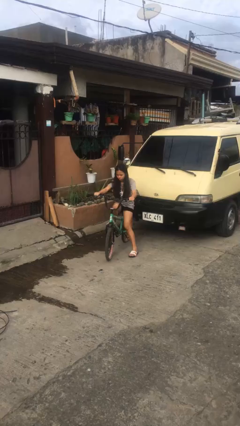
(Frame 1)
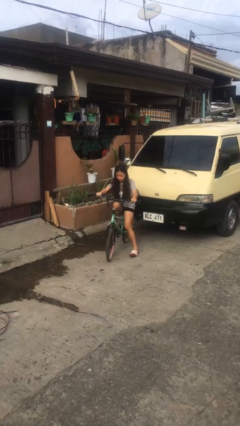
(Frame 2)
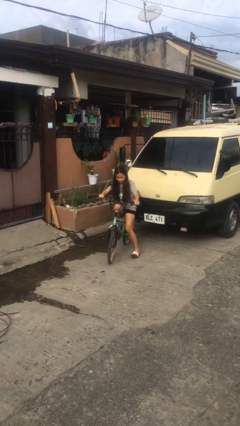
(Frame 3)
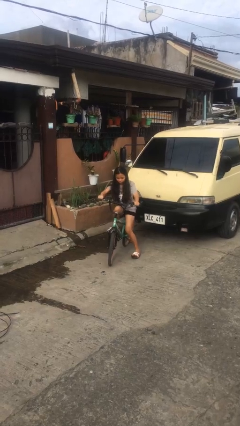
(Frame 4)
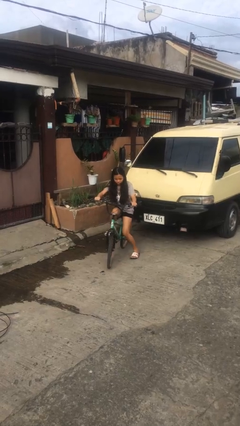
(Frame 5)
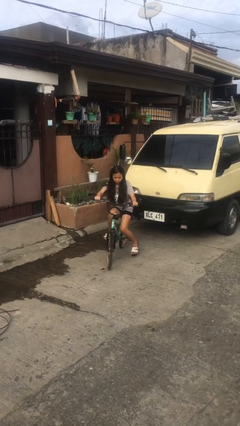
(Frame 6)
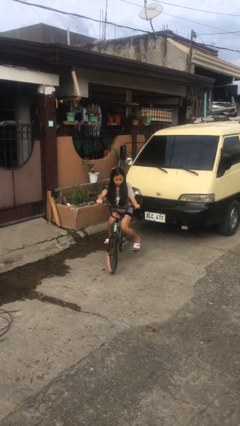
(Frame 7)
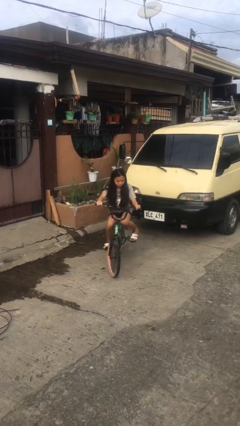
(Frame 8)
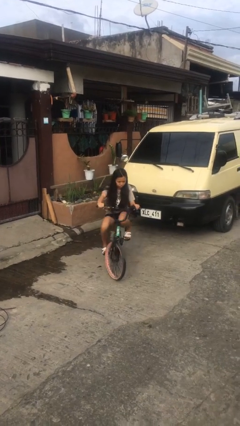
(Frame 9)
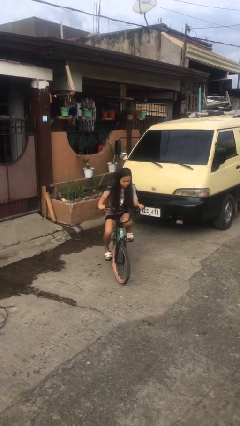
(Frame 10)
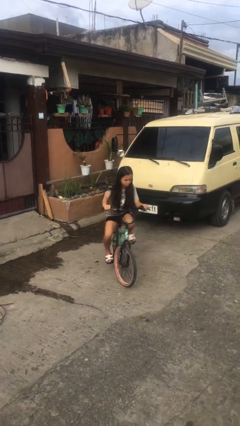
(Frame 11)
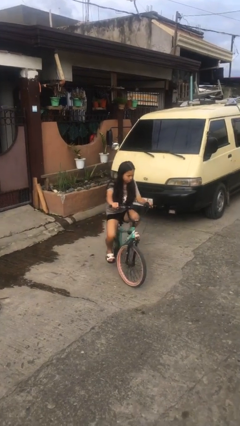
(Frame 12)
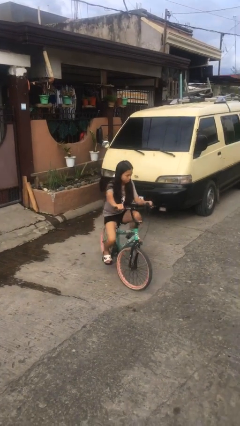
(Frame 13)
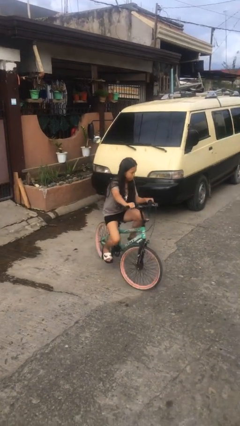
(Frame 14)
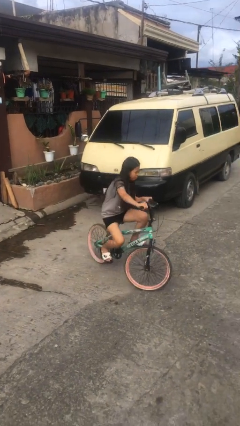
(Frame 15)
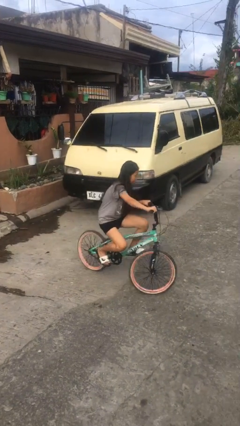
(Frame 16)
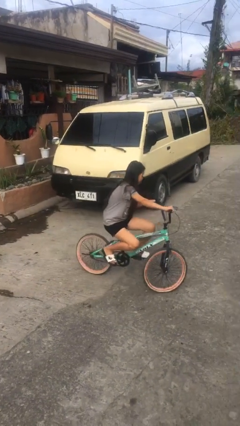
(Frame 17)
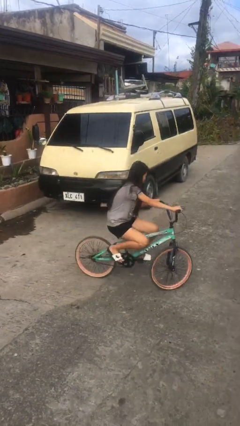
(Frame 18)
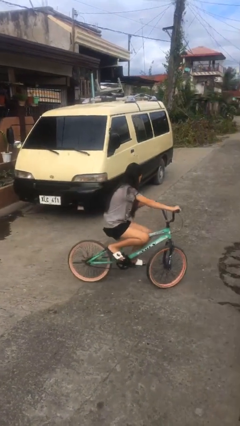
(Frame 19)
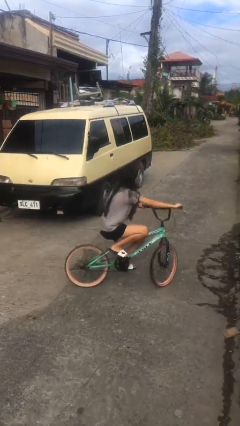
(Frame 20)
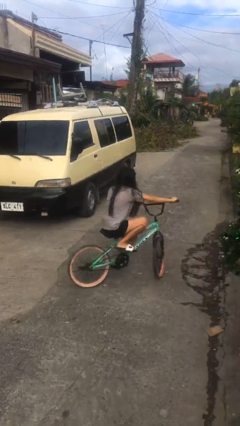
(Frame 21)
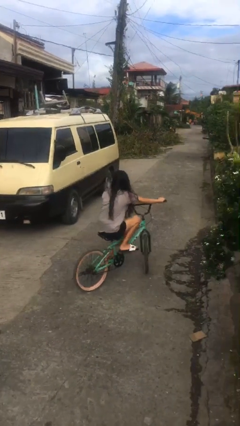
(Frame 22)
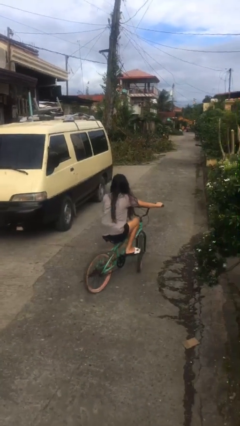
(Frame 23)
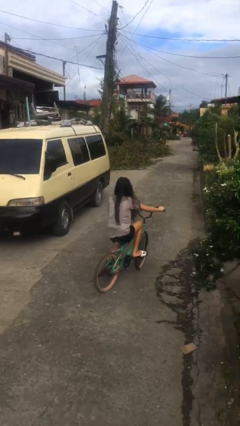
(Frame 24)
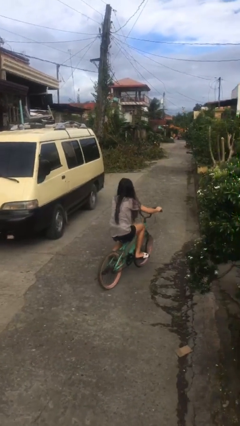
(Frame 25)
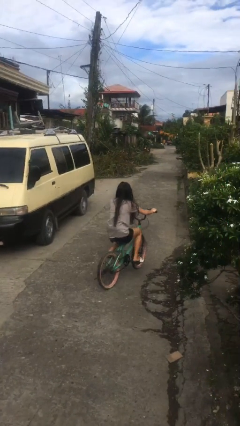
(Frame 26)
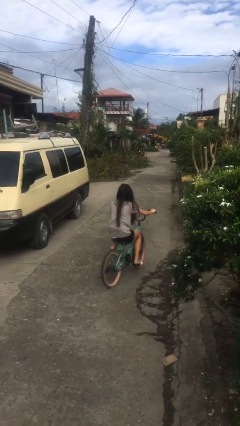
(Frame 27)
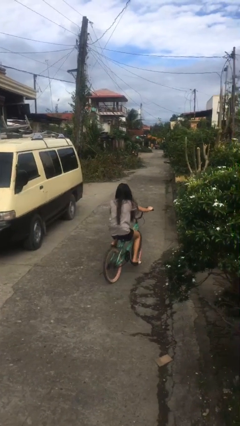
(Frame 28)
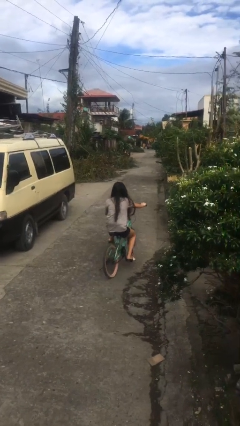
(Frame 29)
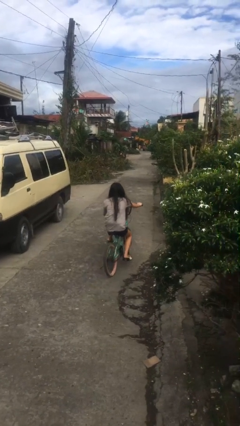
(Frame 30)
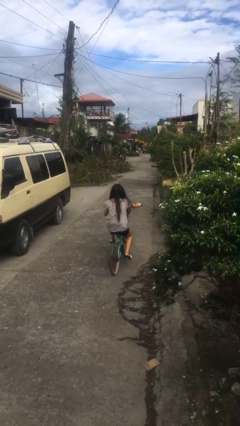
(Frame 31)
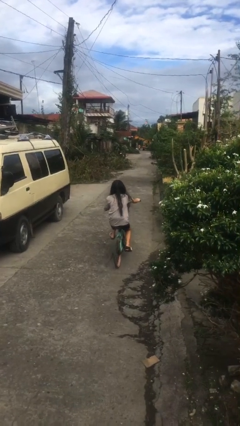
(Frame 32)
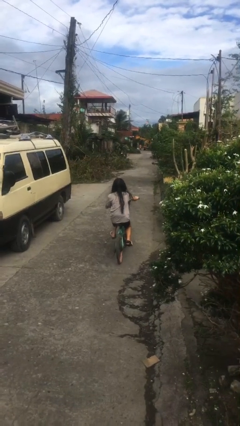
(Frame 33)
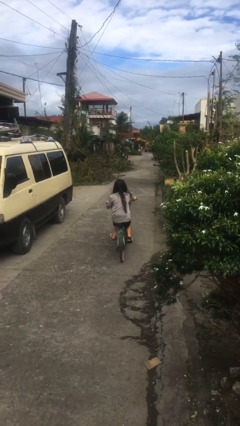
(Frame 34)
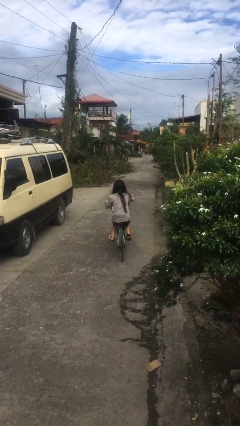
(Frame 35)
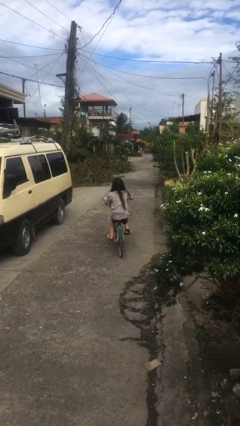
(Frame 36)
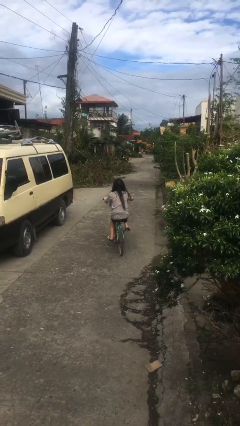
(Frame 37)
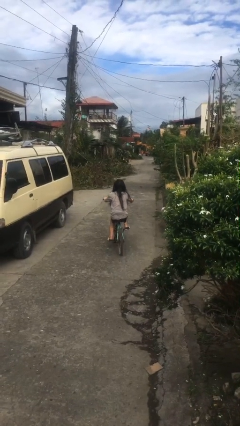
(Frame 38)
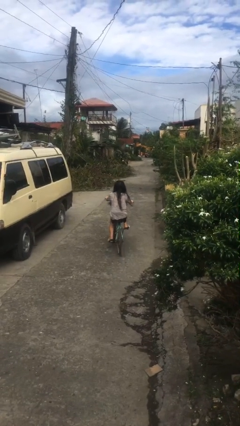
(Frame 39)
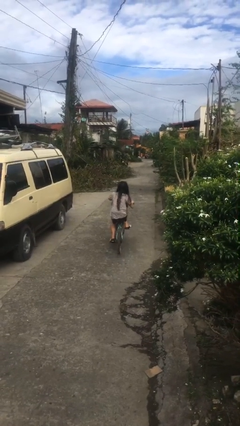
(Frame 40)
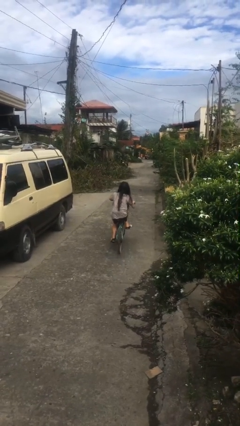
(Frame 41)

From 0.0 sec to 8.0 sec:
person rides bicycle

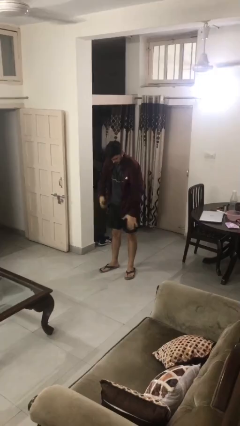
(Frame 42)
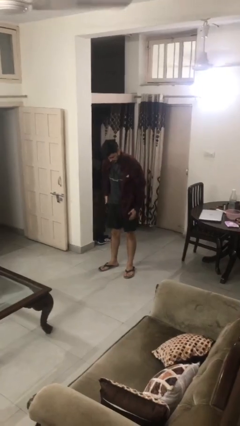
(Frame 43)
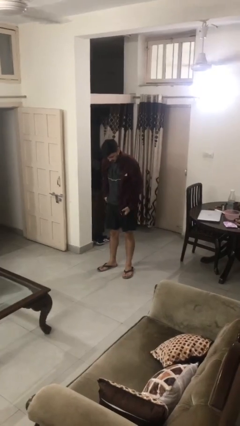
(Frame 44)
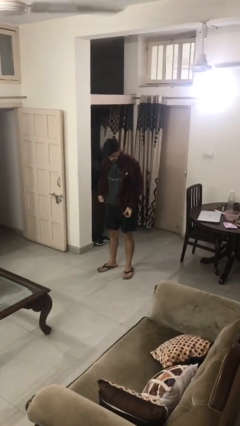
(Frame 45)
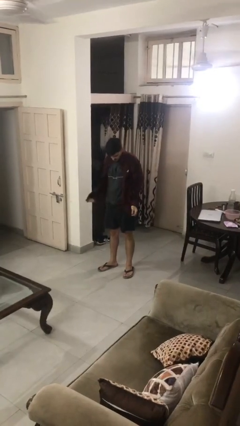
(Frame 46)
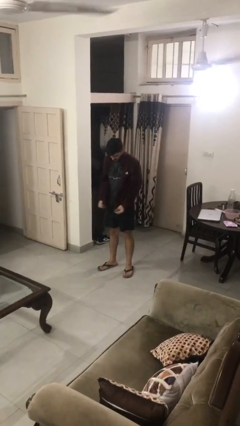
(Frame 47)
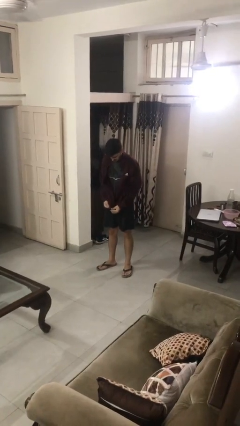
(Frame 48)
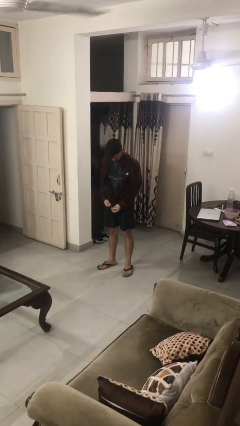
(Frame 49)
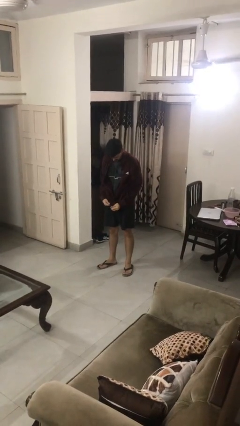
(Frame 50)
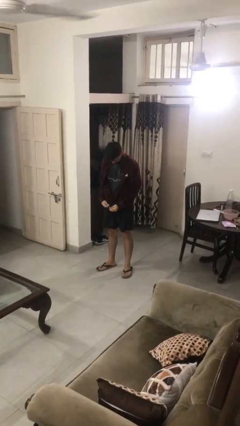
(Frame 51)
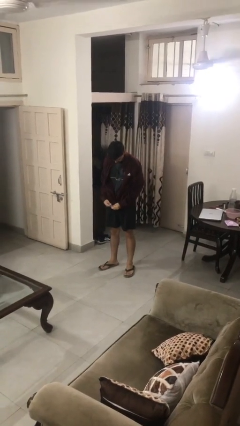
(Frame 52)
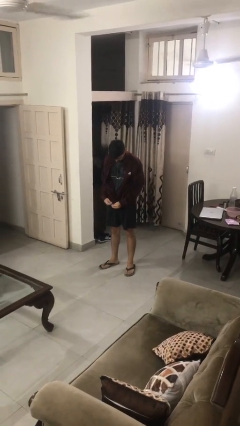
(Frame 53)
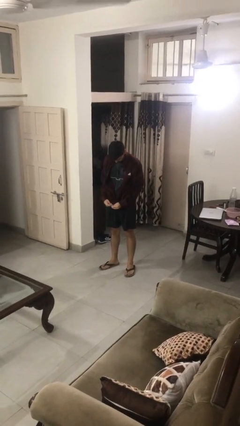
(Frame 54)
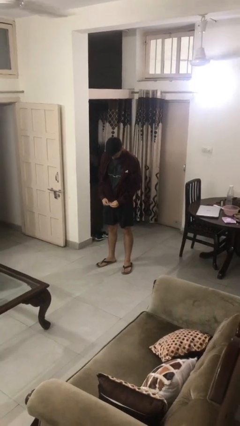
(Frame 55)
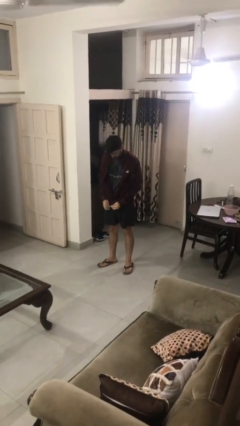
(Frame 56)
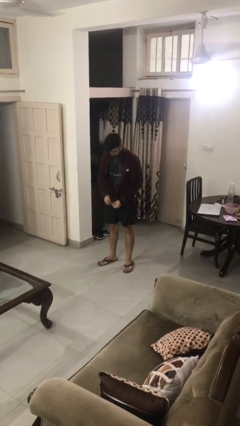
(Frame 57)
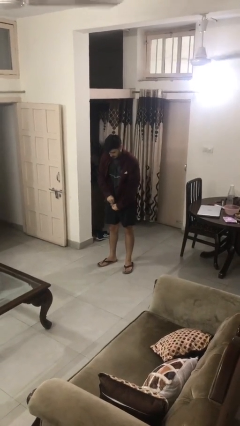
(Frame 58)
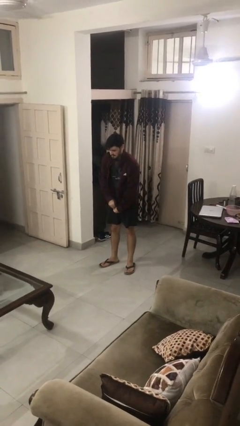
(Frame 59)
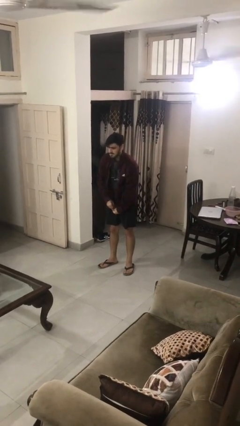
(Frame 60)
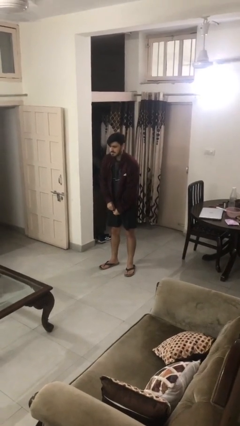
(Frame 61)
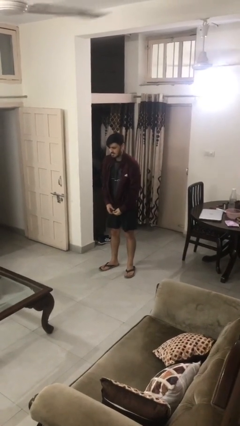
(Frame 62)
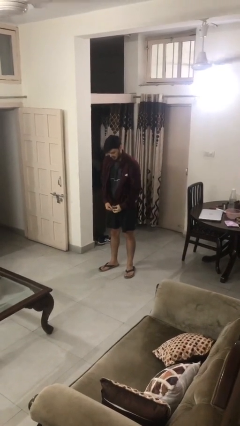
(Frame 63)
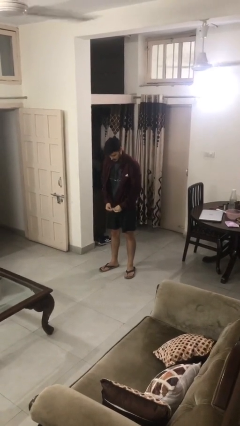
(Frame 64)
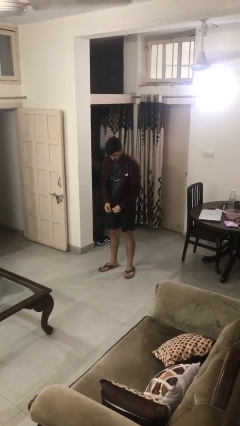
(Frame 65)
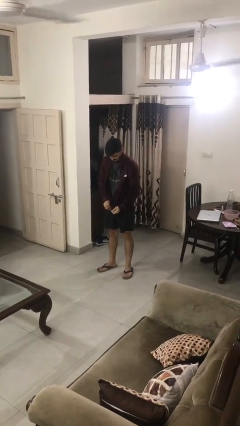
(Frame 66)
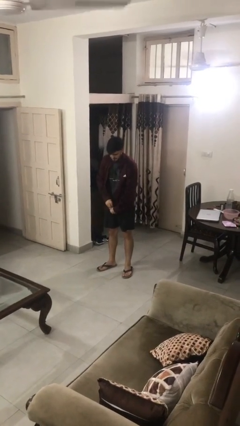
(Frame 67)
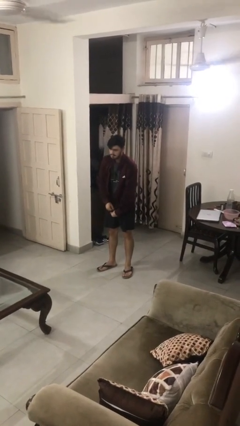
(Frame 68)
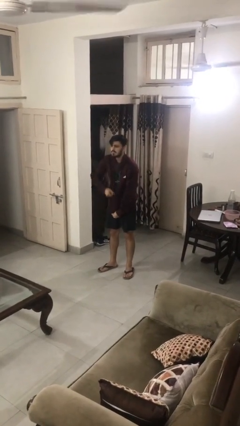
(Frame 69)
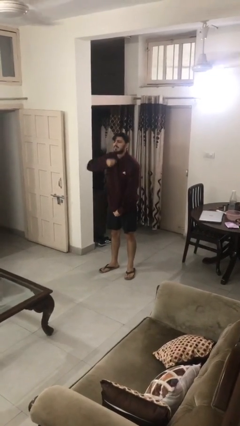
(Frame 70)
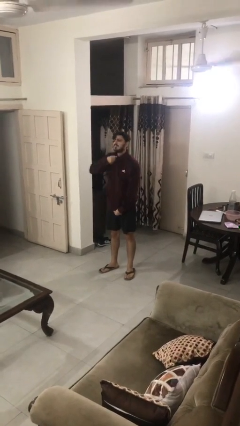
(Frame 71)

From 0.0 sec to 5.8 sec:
person zips up jacket

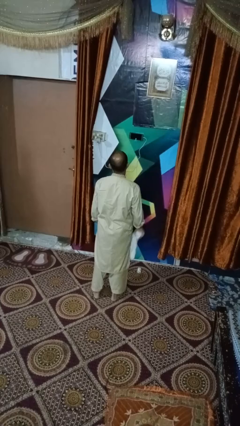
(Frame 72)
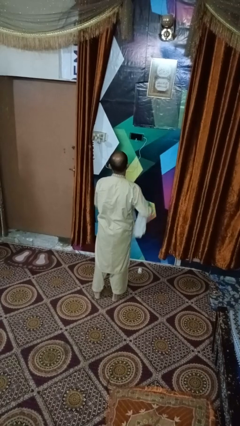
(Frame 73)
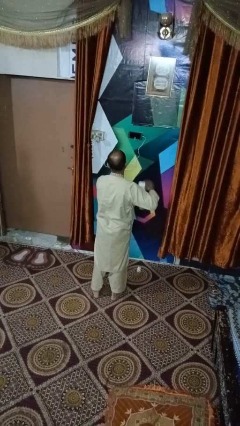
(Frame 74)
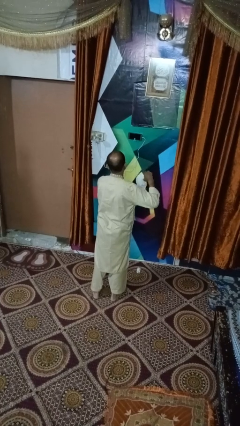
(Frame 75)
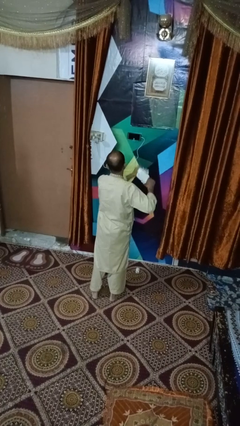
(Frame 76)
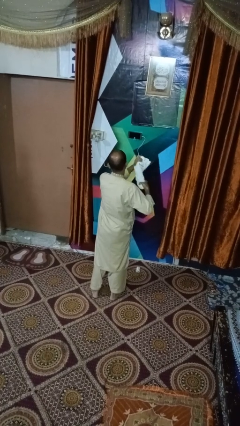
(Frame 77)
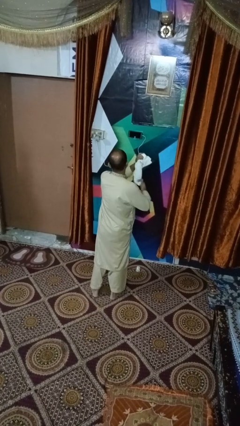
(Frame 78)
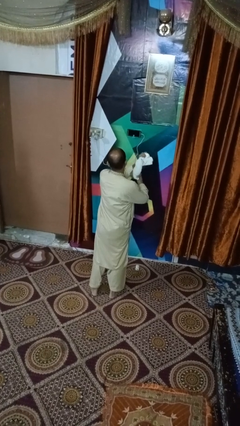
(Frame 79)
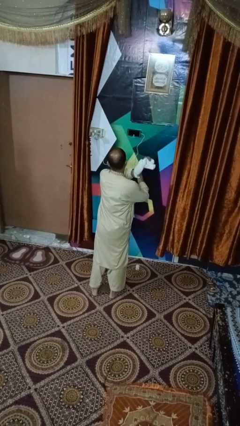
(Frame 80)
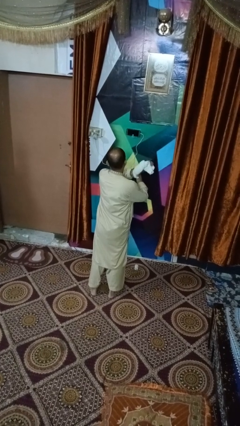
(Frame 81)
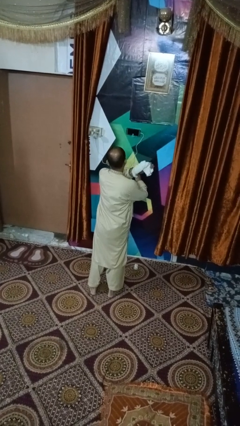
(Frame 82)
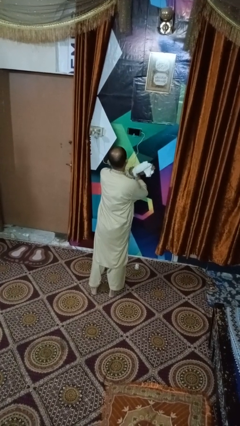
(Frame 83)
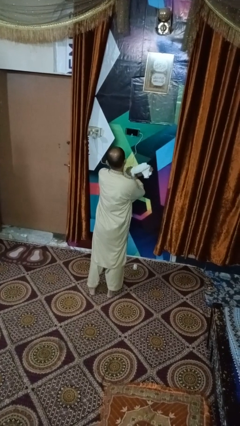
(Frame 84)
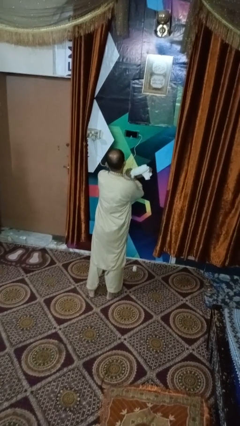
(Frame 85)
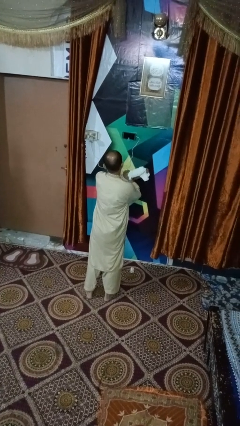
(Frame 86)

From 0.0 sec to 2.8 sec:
person squeezes object

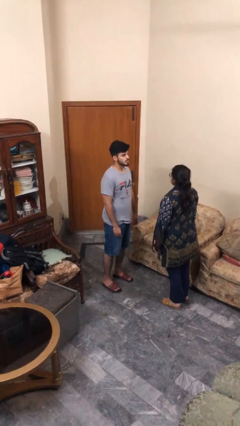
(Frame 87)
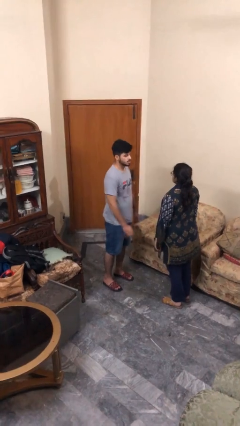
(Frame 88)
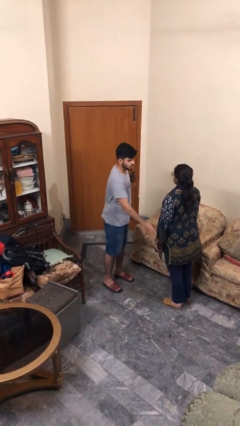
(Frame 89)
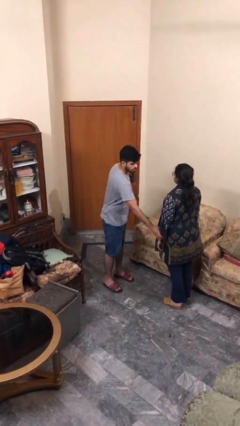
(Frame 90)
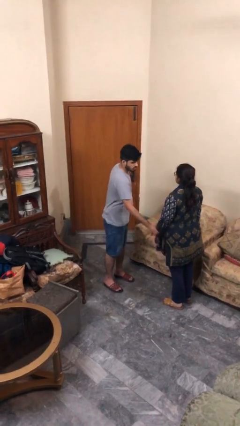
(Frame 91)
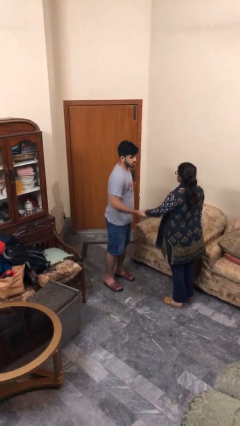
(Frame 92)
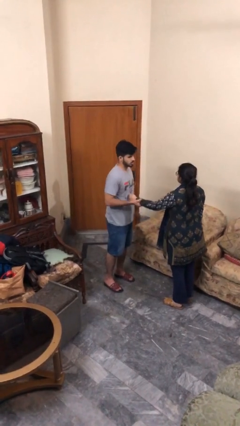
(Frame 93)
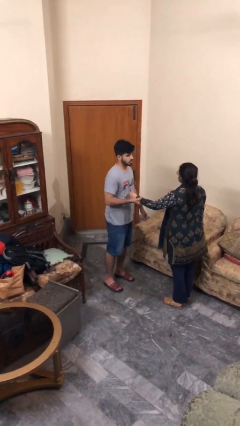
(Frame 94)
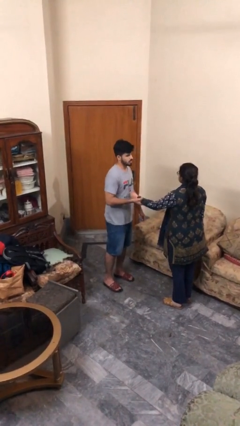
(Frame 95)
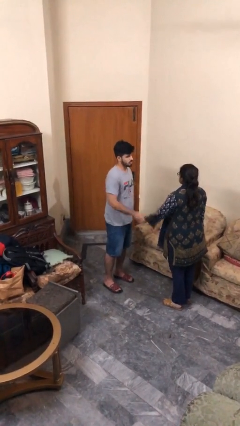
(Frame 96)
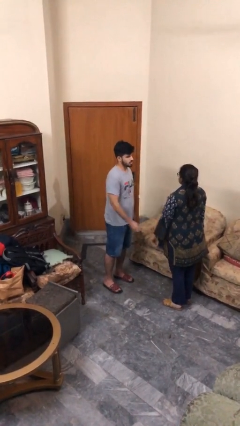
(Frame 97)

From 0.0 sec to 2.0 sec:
person grabs person by forearm
